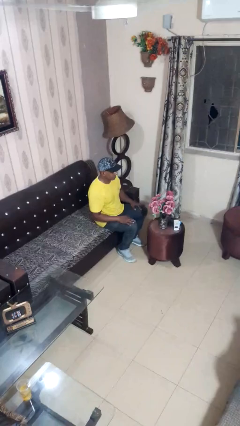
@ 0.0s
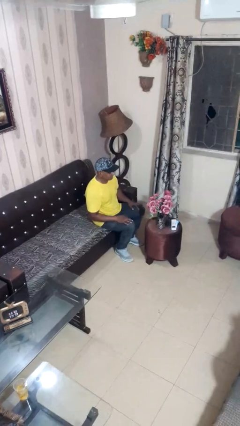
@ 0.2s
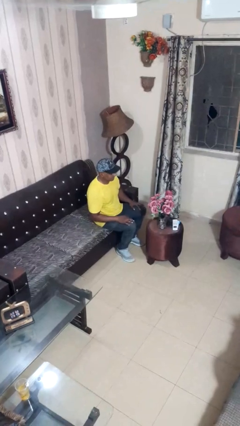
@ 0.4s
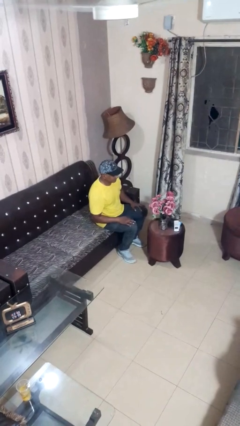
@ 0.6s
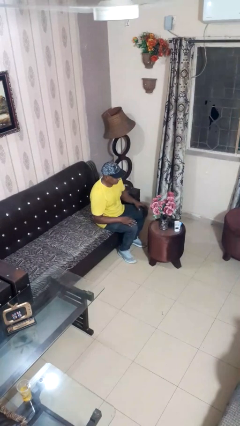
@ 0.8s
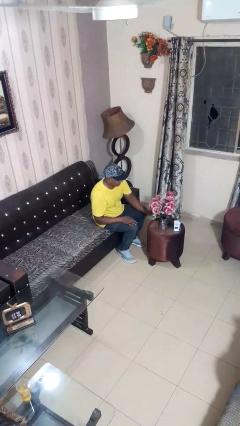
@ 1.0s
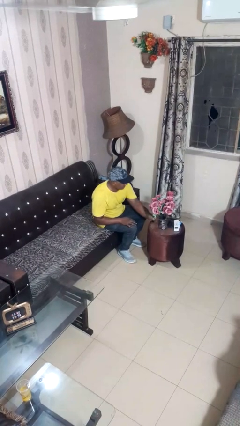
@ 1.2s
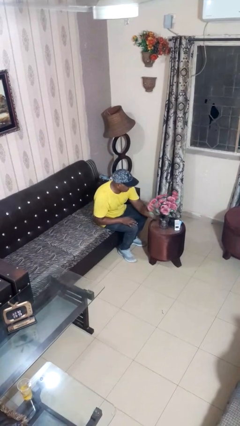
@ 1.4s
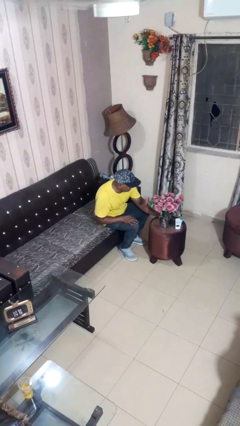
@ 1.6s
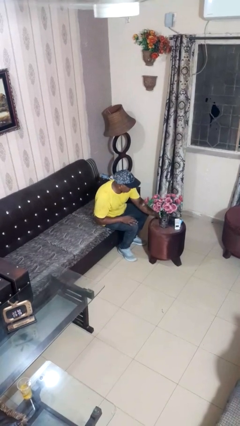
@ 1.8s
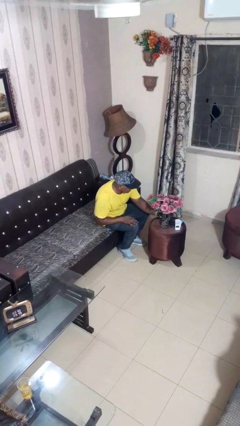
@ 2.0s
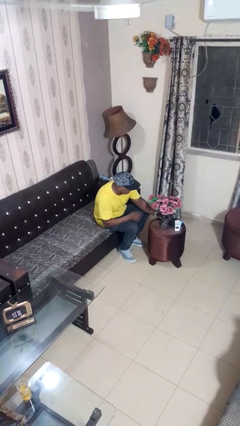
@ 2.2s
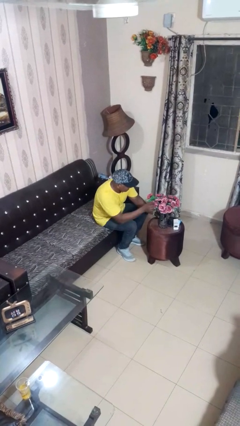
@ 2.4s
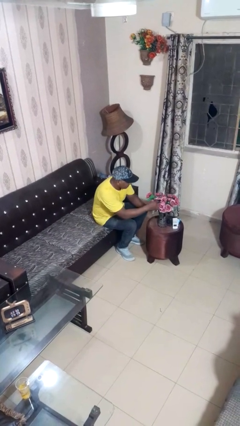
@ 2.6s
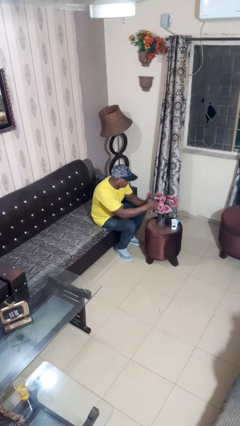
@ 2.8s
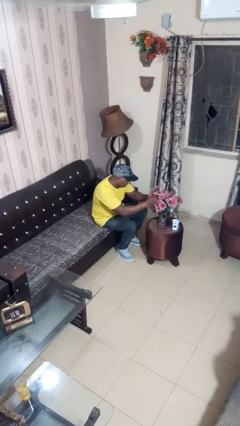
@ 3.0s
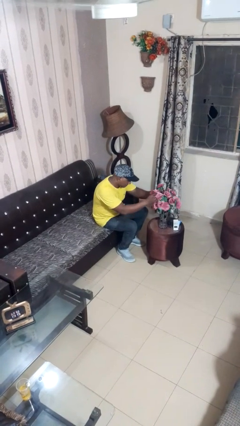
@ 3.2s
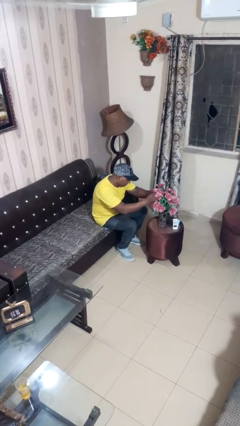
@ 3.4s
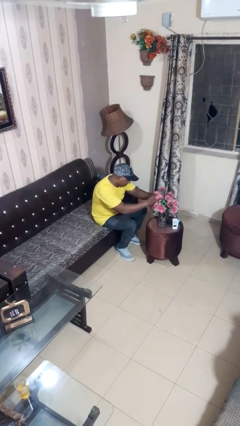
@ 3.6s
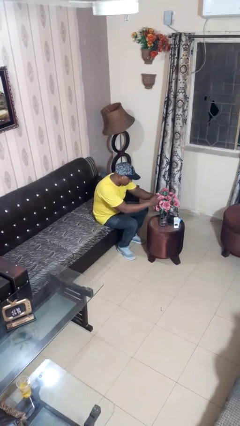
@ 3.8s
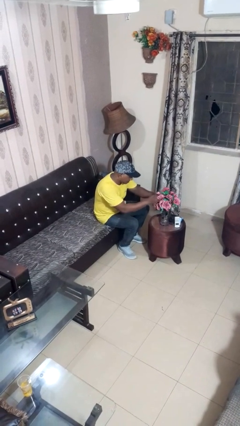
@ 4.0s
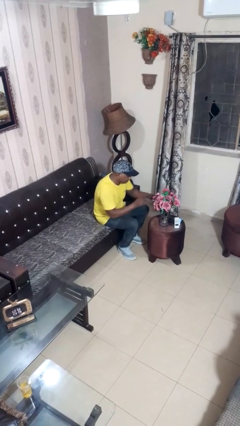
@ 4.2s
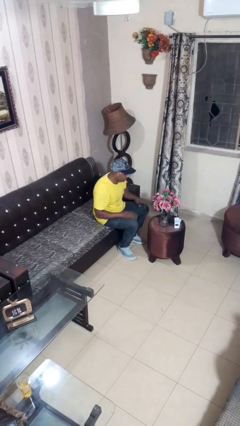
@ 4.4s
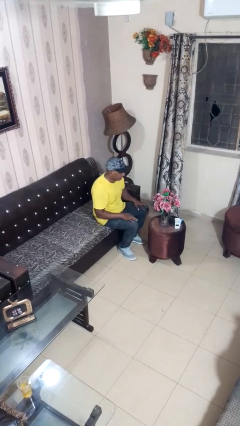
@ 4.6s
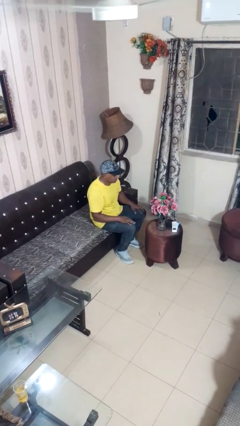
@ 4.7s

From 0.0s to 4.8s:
person arranges flowers in vase

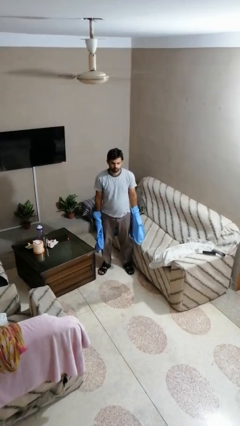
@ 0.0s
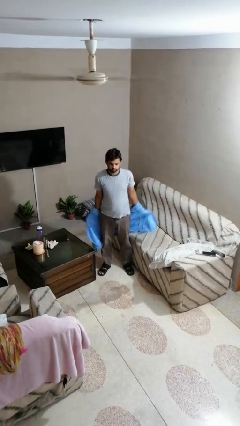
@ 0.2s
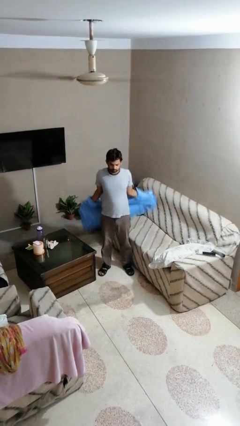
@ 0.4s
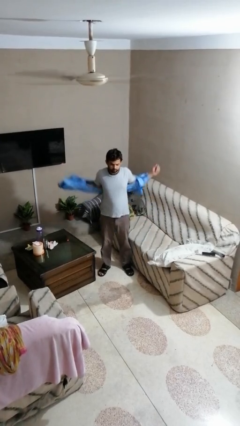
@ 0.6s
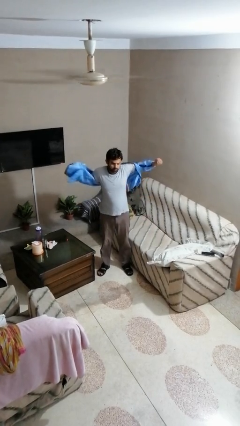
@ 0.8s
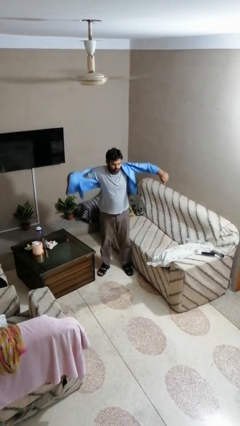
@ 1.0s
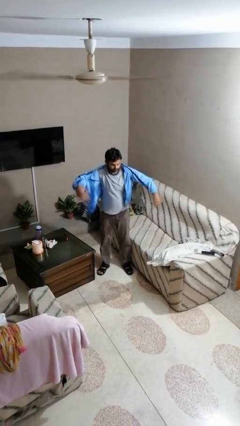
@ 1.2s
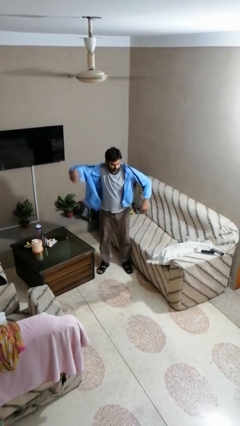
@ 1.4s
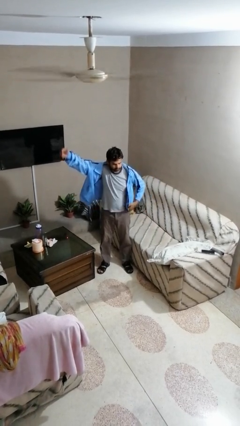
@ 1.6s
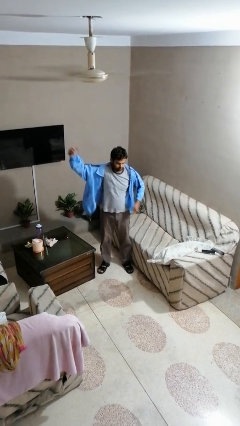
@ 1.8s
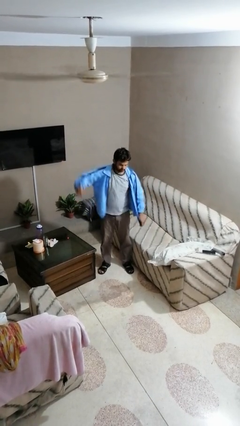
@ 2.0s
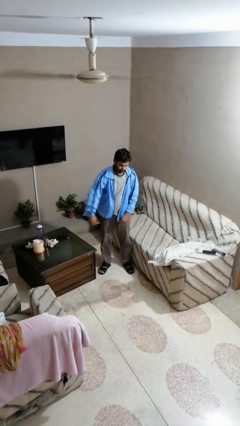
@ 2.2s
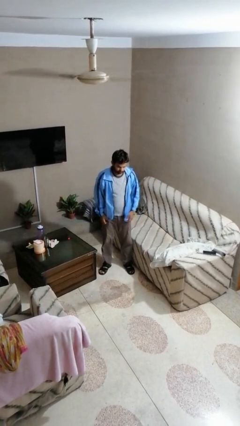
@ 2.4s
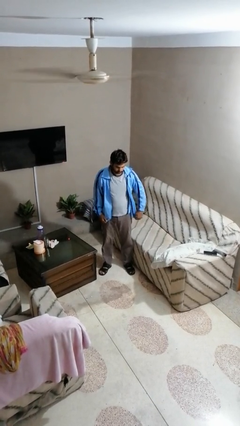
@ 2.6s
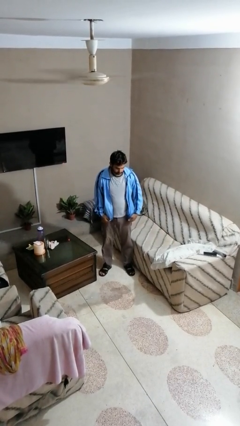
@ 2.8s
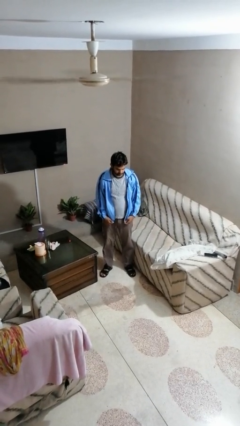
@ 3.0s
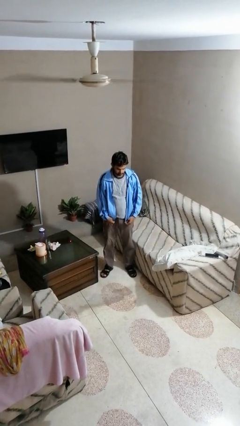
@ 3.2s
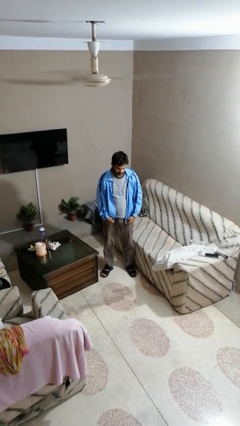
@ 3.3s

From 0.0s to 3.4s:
person puts on jacket

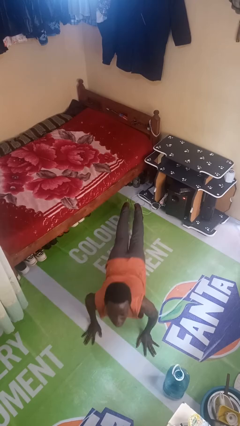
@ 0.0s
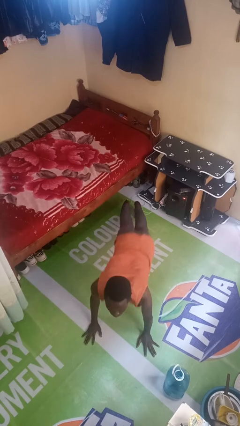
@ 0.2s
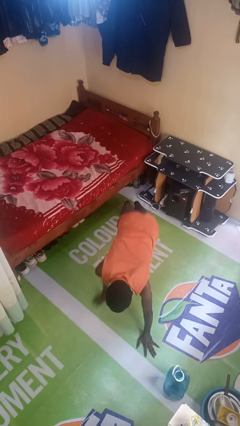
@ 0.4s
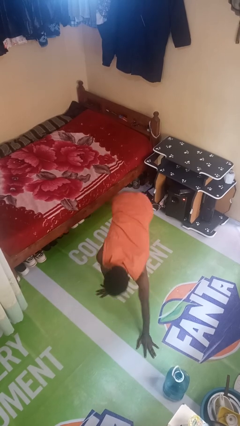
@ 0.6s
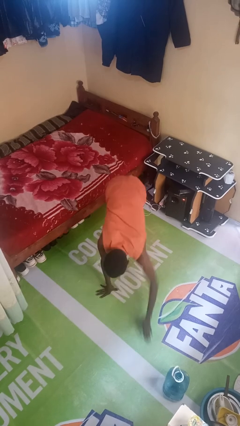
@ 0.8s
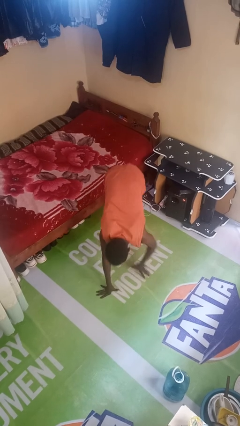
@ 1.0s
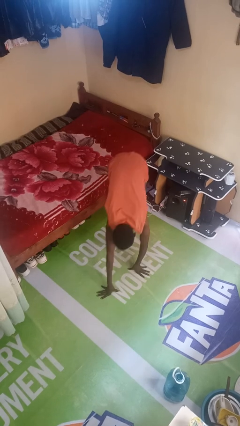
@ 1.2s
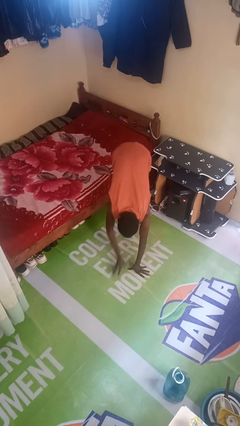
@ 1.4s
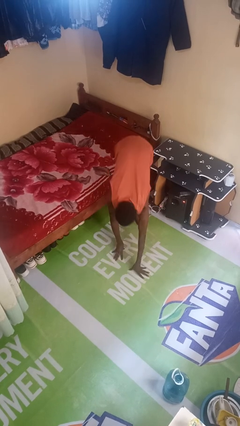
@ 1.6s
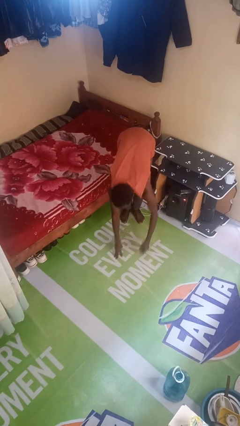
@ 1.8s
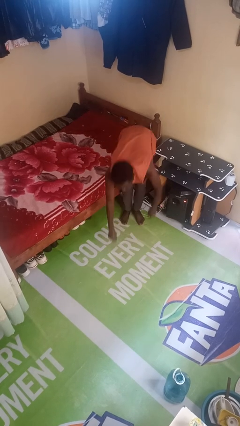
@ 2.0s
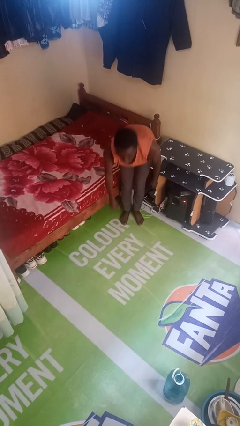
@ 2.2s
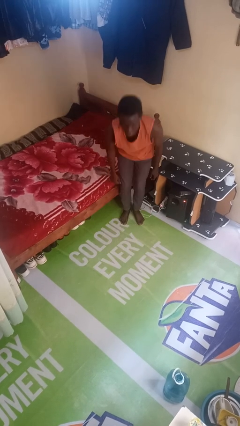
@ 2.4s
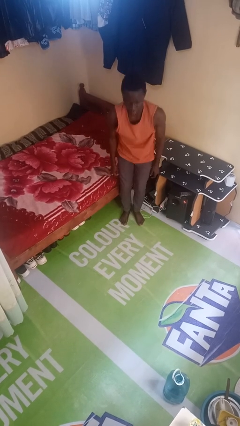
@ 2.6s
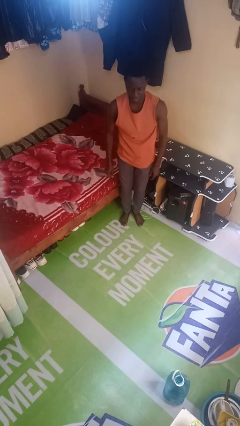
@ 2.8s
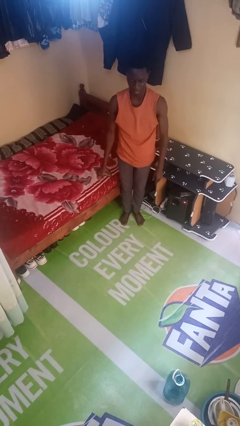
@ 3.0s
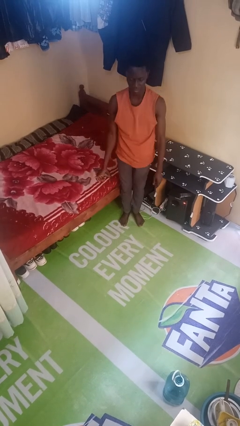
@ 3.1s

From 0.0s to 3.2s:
person stands up from floor

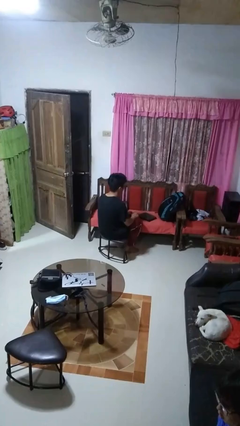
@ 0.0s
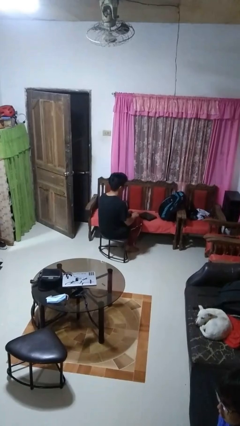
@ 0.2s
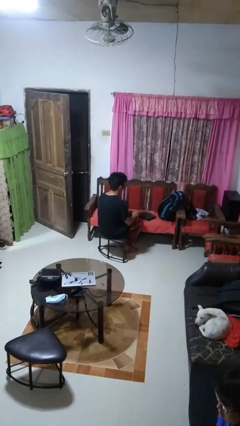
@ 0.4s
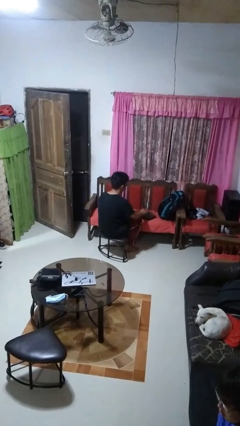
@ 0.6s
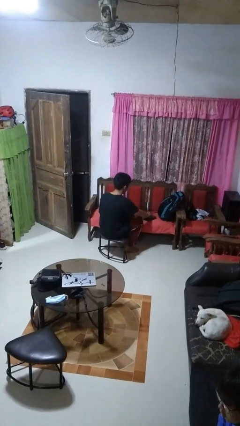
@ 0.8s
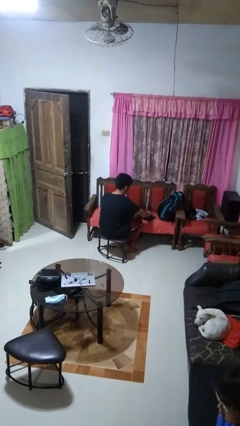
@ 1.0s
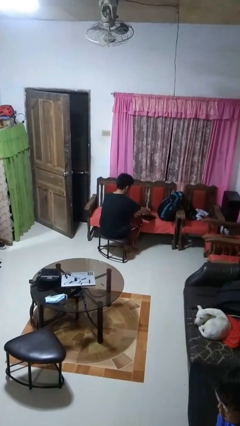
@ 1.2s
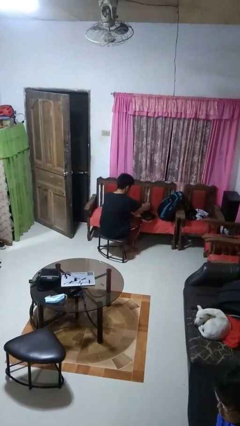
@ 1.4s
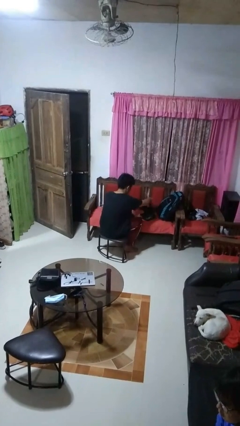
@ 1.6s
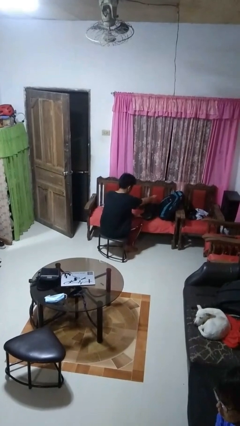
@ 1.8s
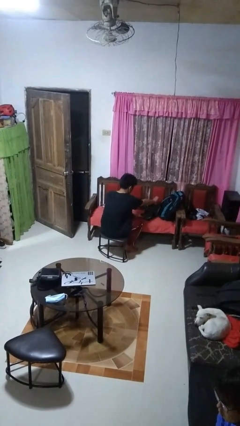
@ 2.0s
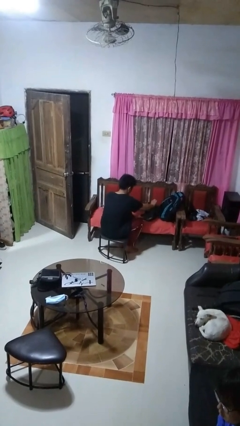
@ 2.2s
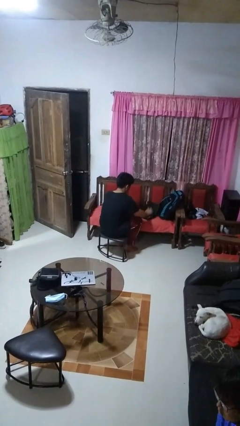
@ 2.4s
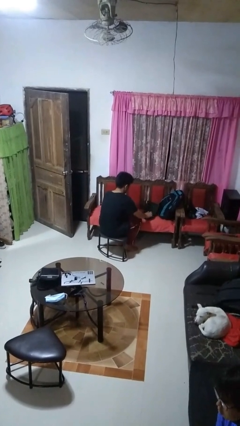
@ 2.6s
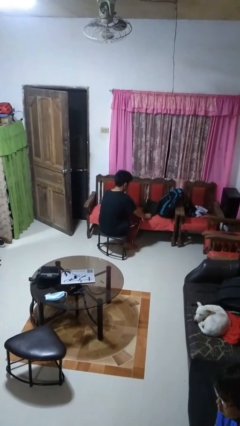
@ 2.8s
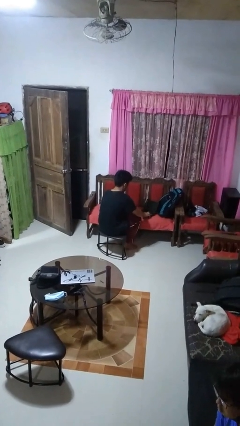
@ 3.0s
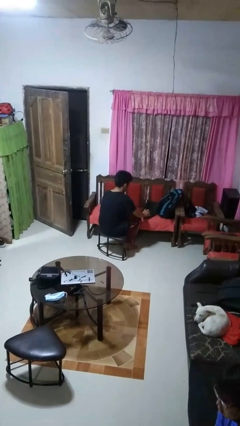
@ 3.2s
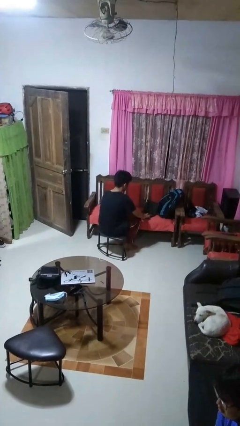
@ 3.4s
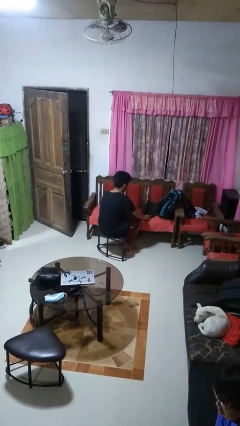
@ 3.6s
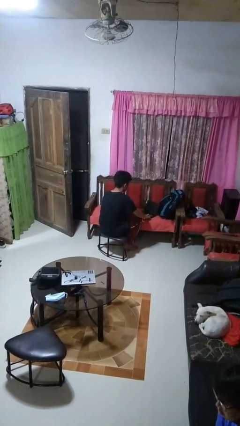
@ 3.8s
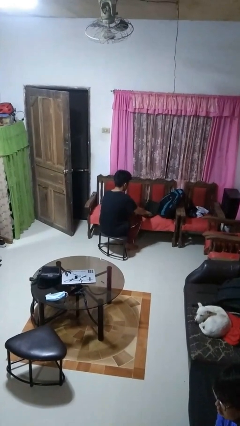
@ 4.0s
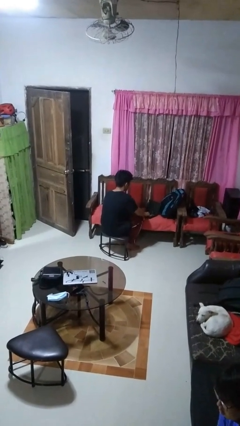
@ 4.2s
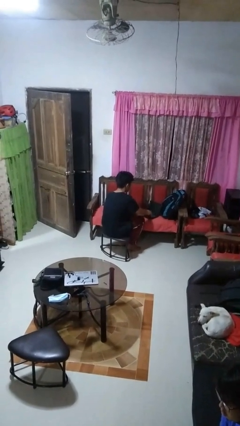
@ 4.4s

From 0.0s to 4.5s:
person opens laptop

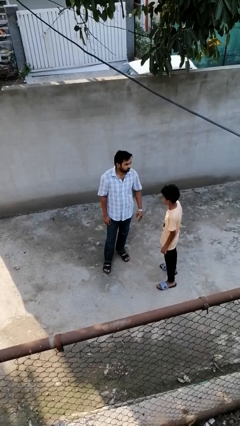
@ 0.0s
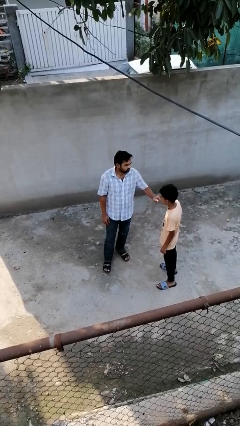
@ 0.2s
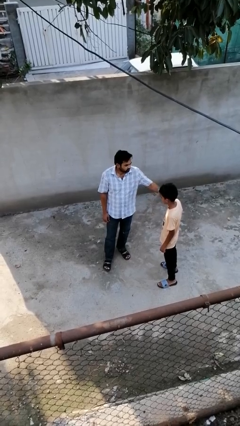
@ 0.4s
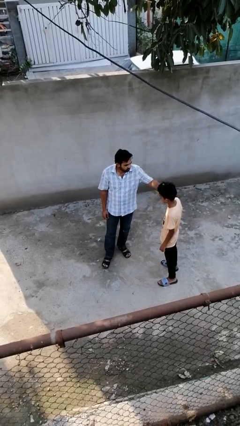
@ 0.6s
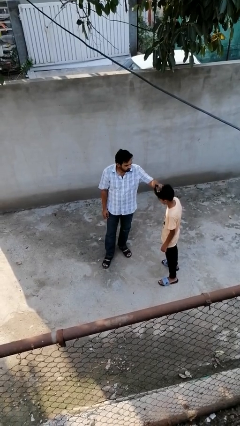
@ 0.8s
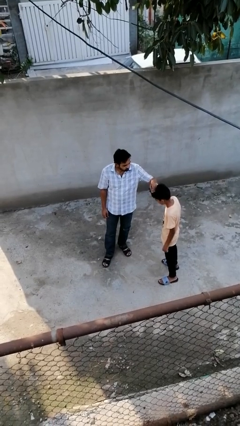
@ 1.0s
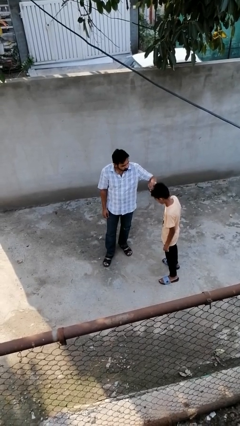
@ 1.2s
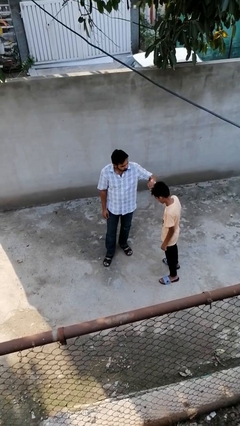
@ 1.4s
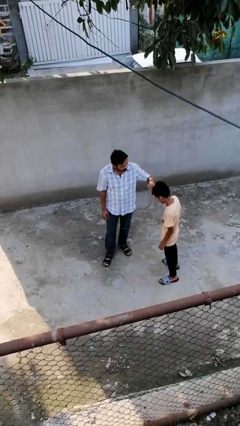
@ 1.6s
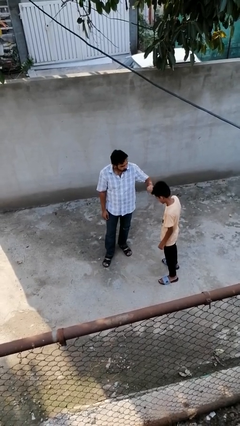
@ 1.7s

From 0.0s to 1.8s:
person grabs person by hair
